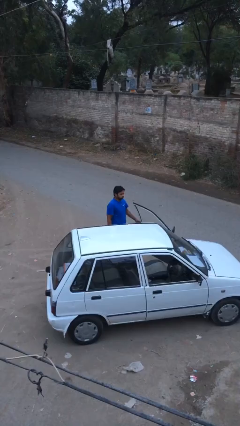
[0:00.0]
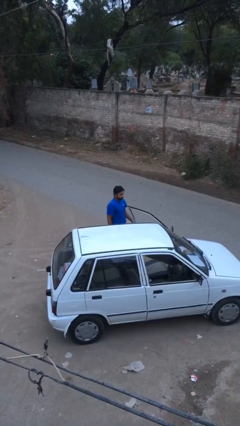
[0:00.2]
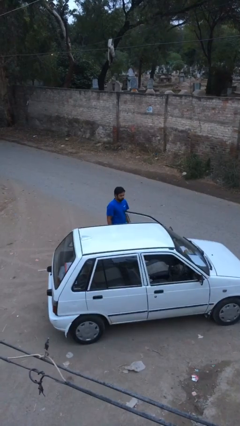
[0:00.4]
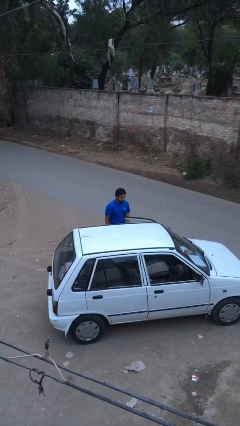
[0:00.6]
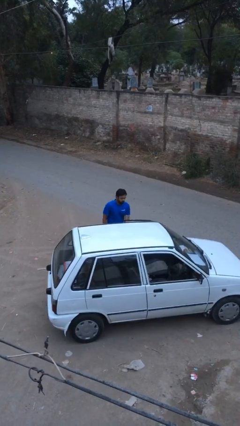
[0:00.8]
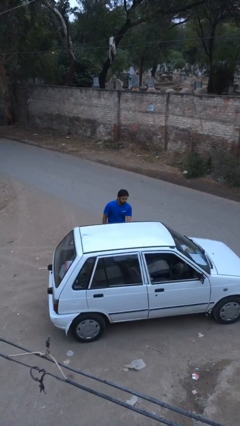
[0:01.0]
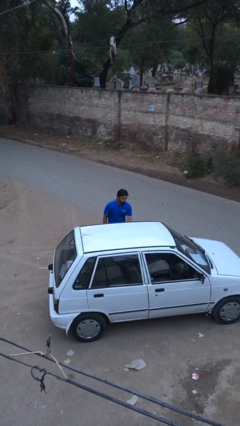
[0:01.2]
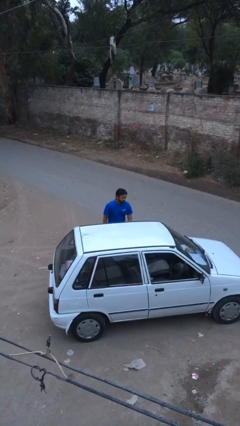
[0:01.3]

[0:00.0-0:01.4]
person closes car door

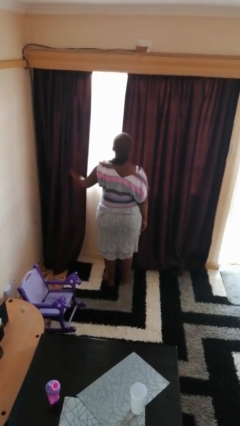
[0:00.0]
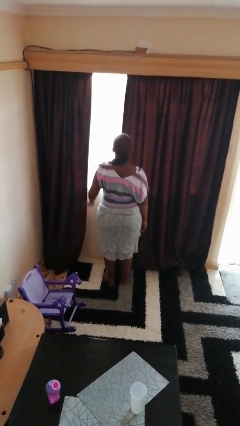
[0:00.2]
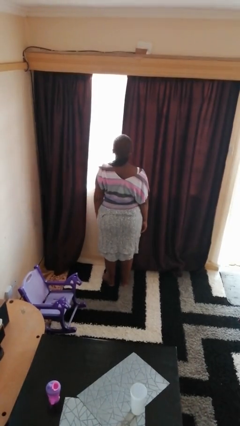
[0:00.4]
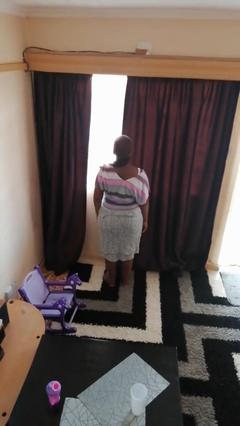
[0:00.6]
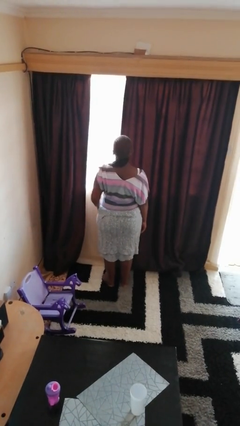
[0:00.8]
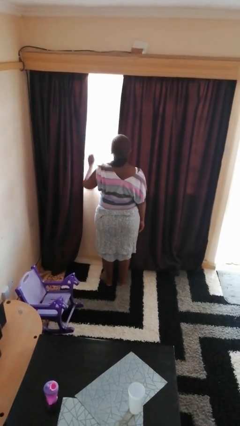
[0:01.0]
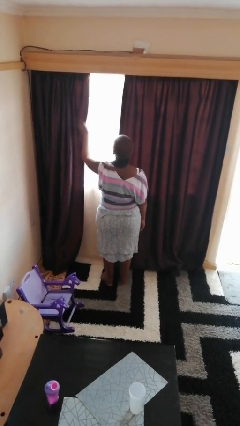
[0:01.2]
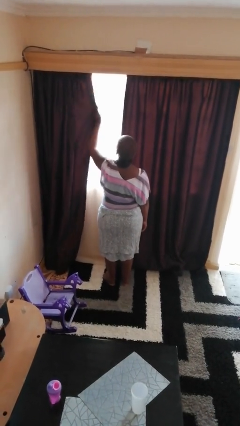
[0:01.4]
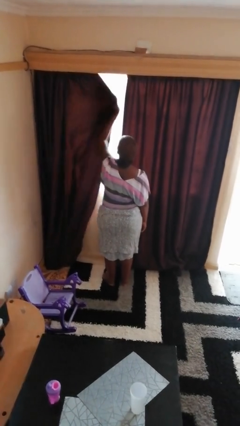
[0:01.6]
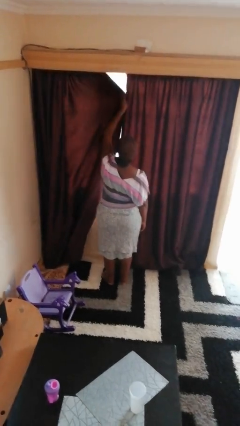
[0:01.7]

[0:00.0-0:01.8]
person closes curtains

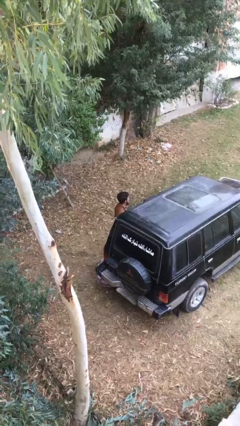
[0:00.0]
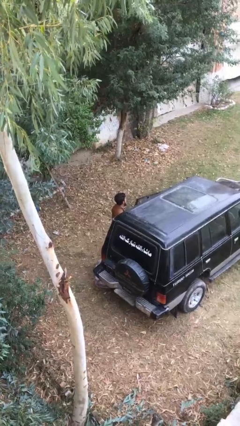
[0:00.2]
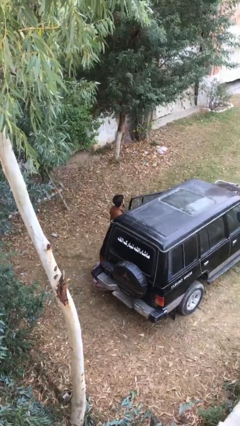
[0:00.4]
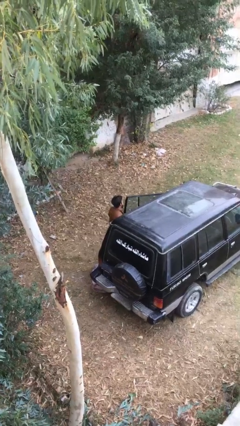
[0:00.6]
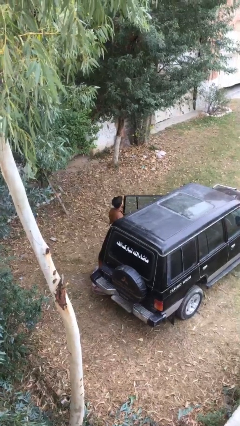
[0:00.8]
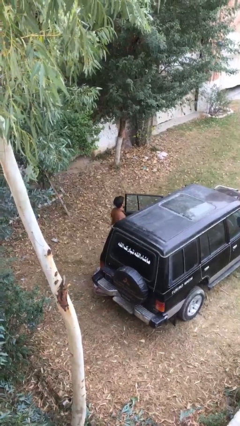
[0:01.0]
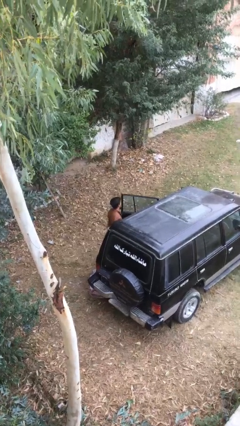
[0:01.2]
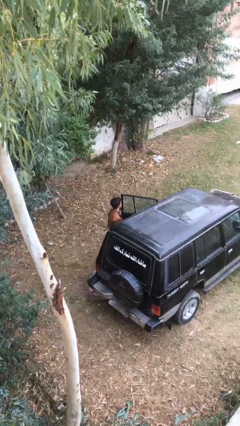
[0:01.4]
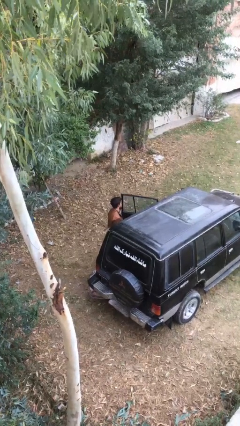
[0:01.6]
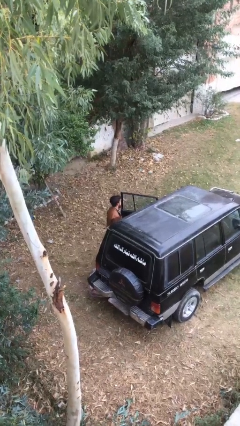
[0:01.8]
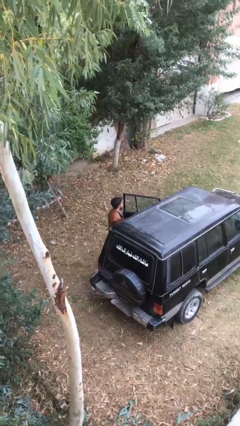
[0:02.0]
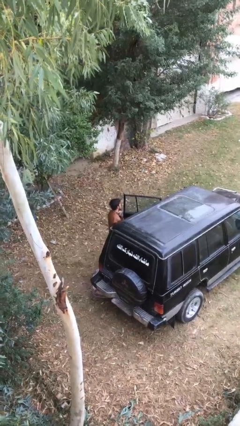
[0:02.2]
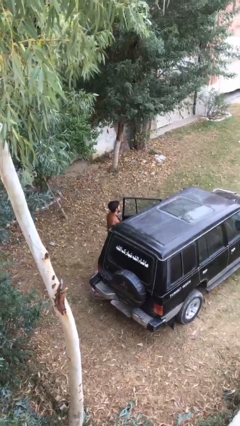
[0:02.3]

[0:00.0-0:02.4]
person opens car door

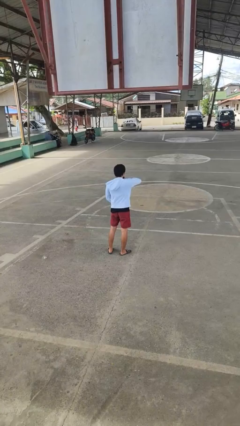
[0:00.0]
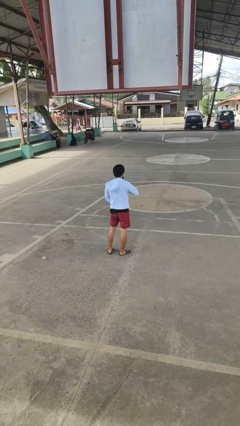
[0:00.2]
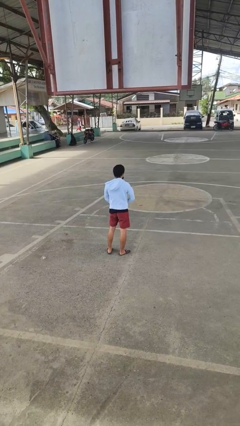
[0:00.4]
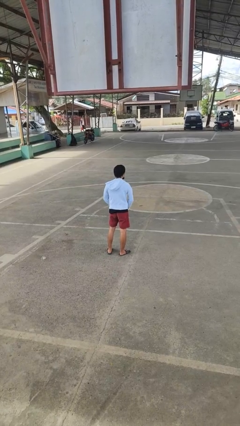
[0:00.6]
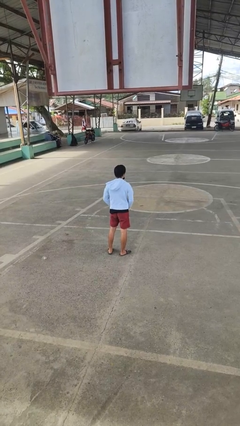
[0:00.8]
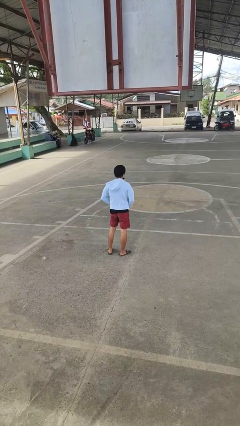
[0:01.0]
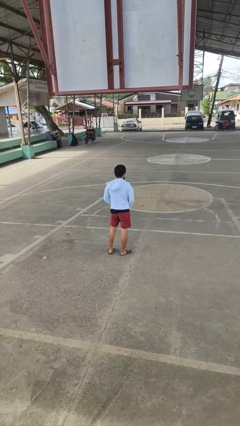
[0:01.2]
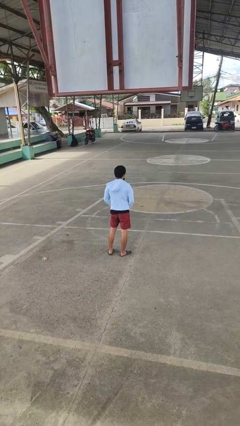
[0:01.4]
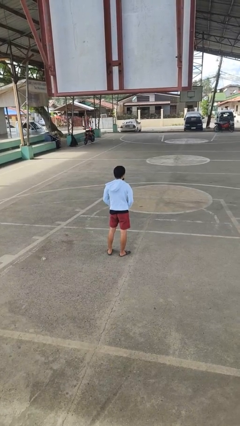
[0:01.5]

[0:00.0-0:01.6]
person unzips jacket

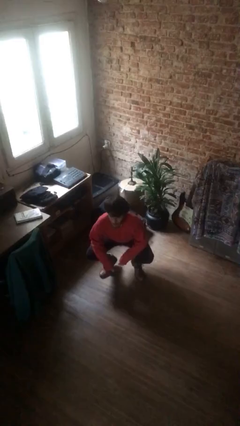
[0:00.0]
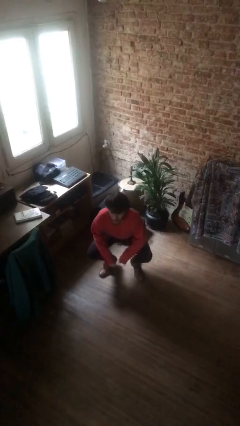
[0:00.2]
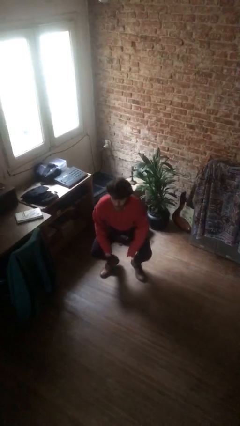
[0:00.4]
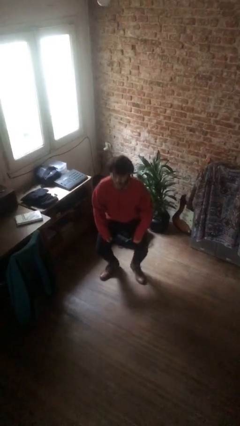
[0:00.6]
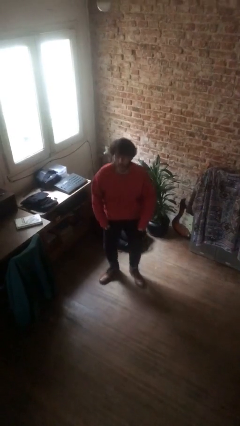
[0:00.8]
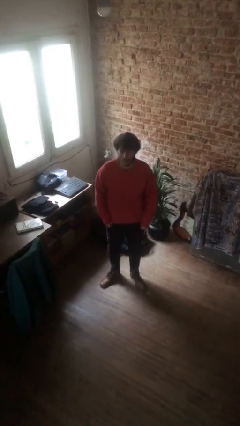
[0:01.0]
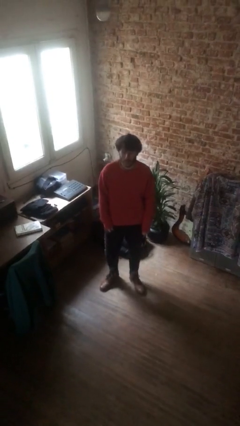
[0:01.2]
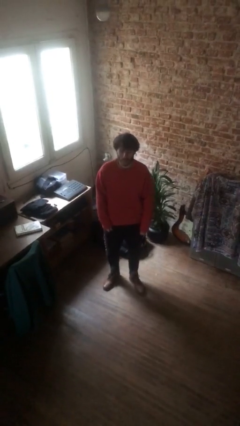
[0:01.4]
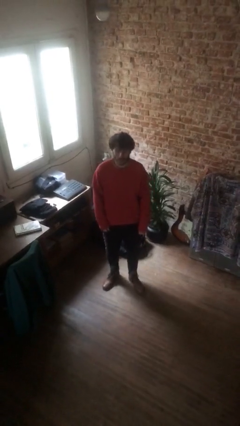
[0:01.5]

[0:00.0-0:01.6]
person stands up

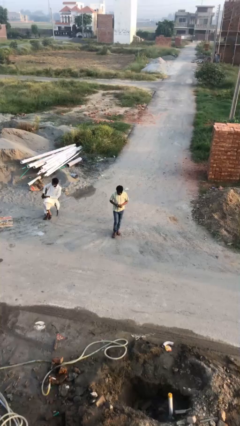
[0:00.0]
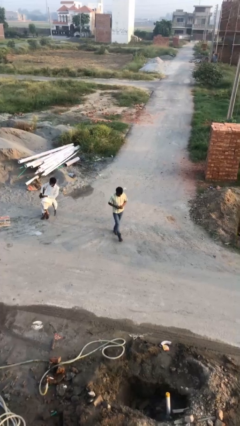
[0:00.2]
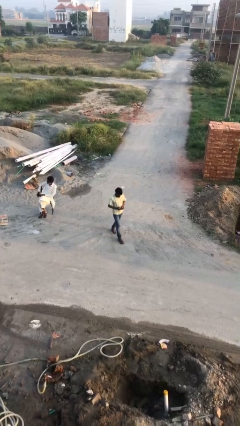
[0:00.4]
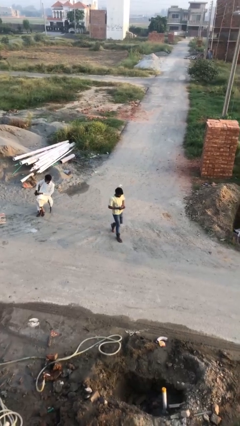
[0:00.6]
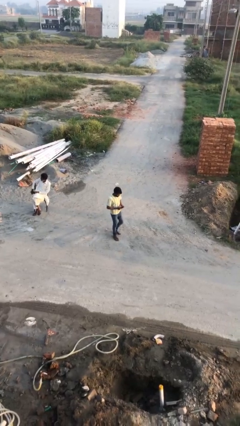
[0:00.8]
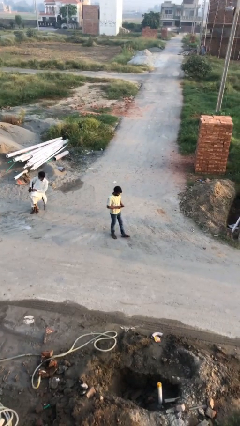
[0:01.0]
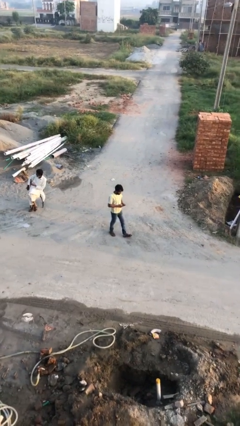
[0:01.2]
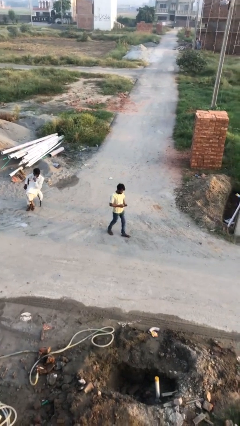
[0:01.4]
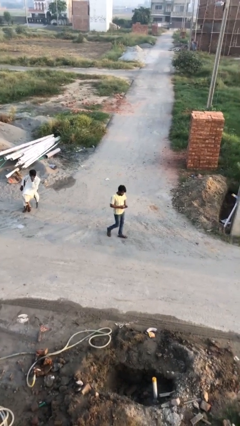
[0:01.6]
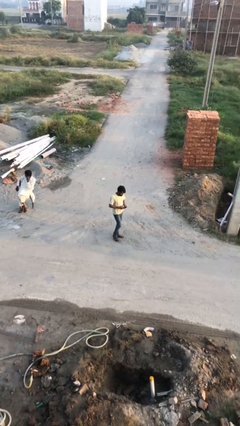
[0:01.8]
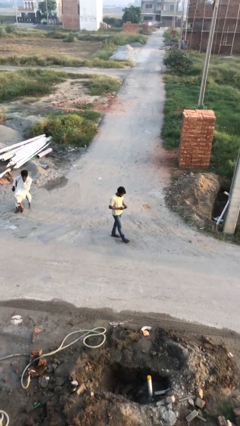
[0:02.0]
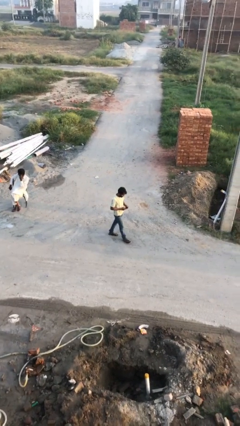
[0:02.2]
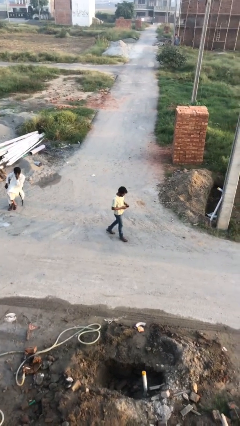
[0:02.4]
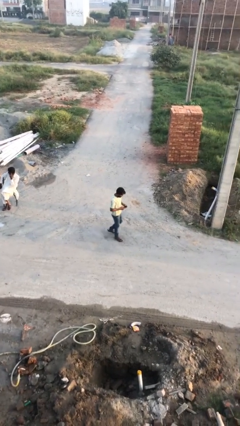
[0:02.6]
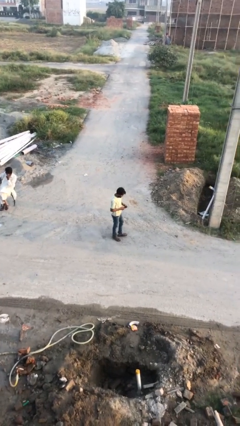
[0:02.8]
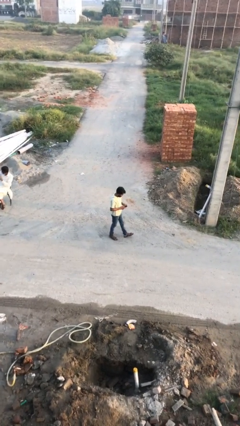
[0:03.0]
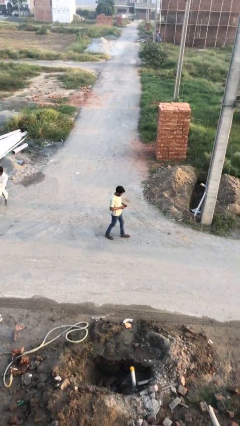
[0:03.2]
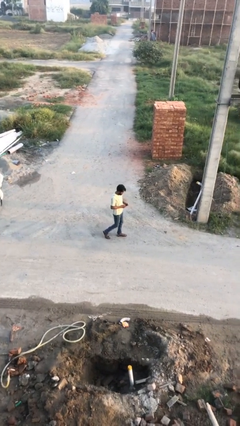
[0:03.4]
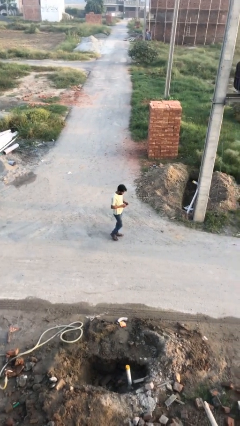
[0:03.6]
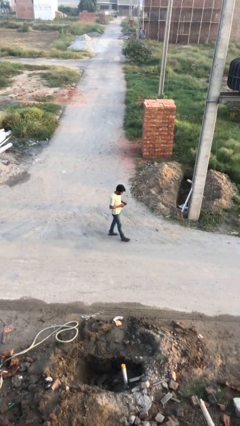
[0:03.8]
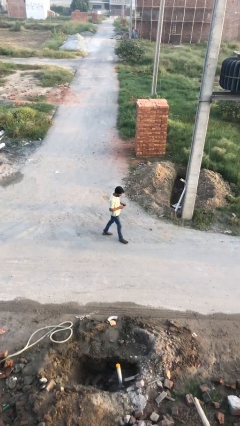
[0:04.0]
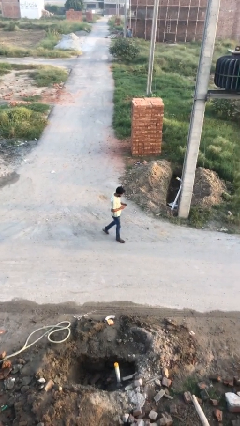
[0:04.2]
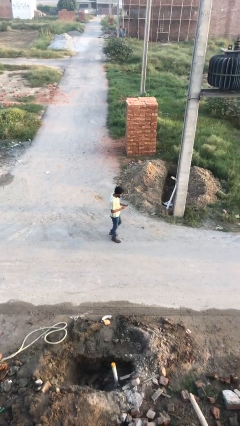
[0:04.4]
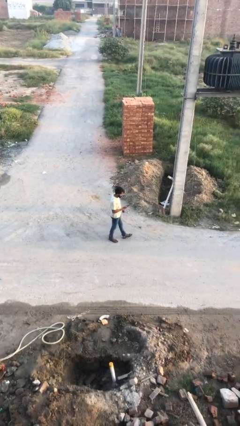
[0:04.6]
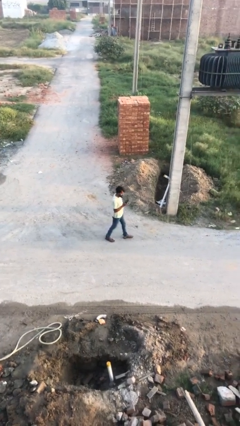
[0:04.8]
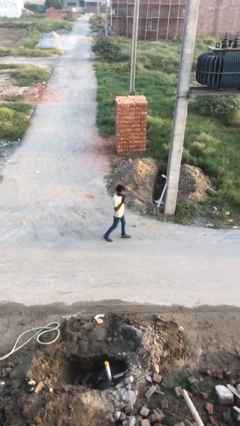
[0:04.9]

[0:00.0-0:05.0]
person texts on phone

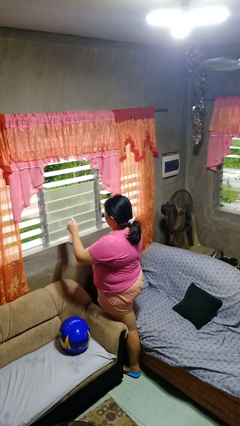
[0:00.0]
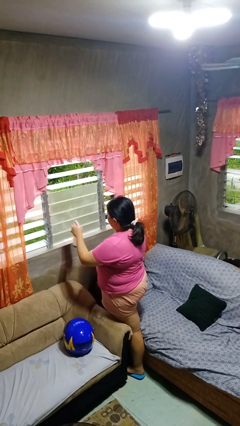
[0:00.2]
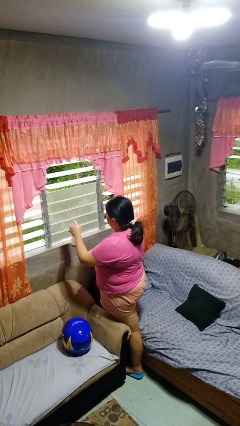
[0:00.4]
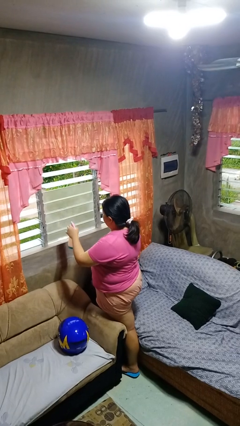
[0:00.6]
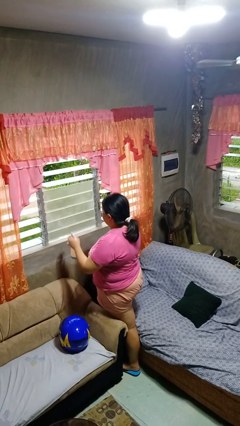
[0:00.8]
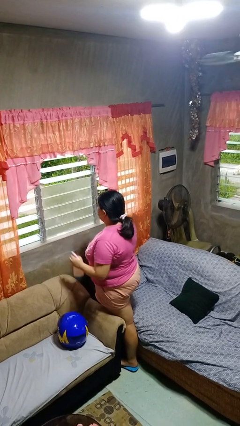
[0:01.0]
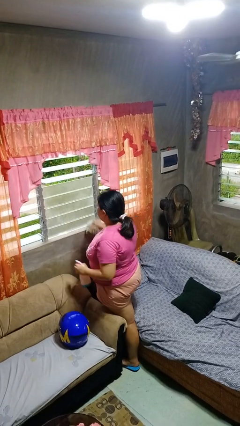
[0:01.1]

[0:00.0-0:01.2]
person sprays from bottle

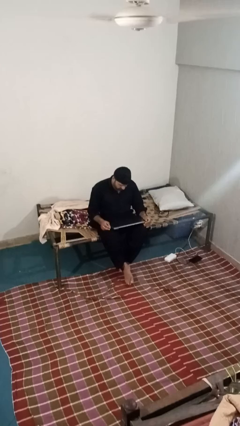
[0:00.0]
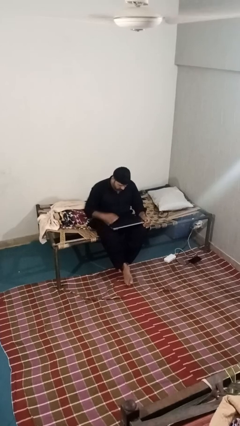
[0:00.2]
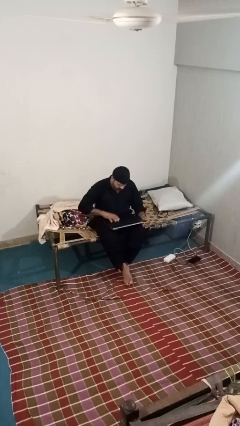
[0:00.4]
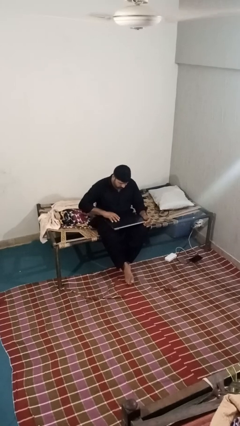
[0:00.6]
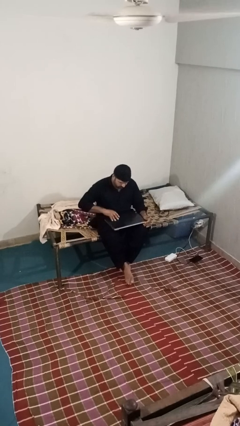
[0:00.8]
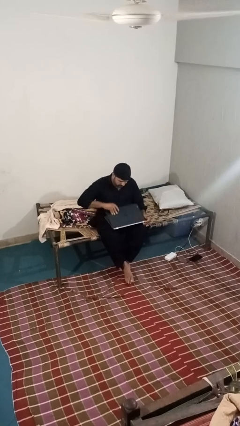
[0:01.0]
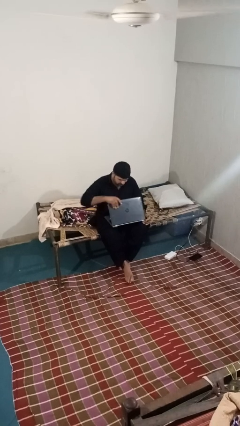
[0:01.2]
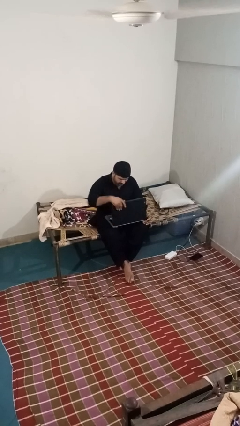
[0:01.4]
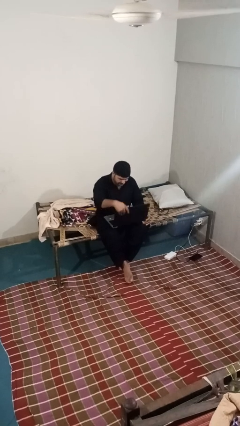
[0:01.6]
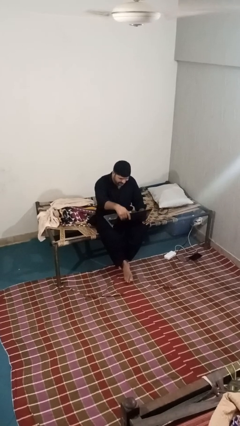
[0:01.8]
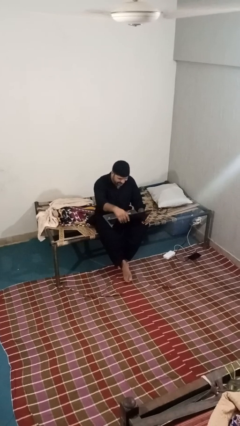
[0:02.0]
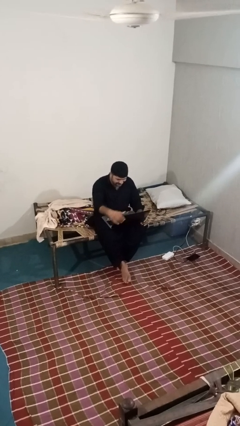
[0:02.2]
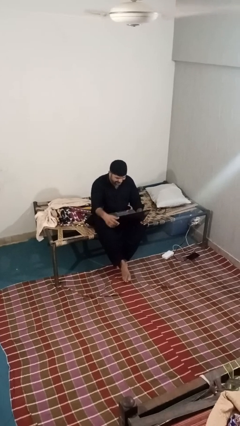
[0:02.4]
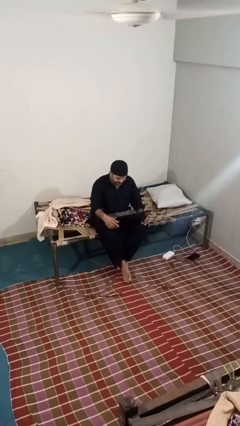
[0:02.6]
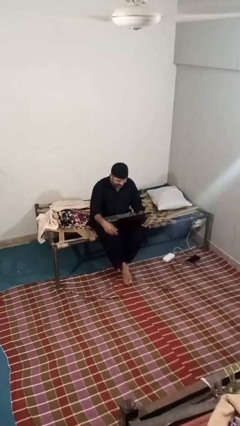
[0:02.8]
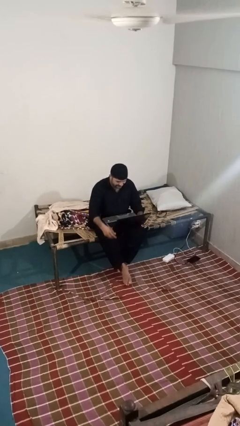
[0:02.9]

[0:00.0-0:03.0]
person opens laptop
